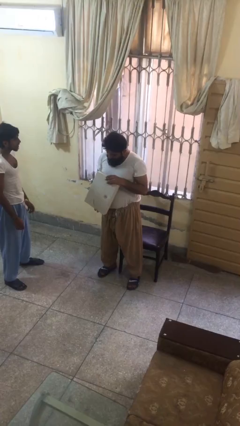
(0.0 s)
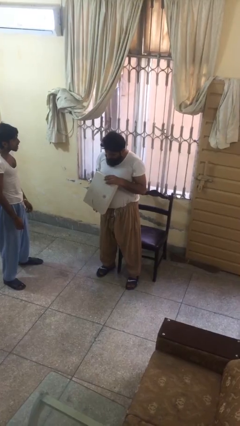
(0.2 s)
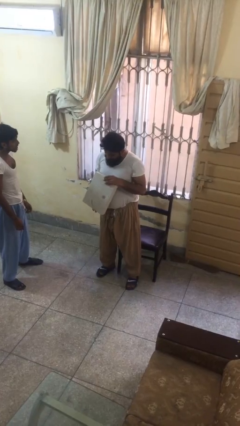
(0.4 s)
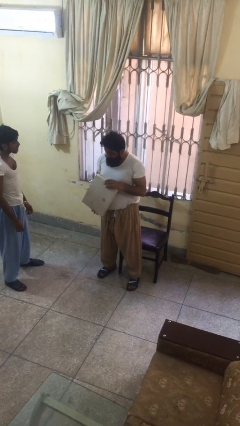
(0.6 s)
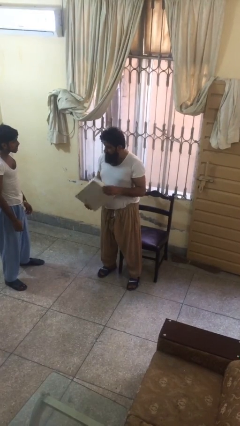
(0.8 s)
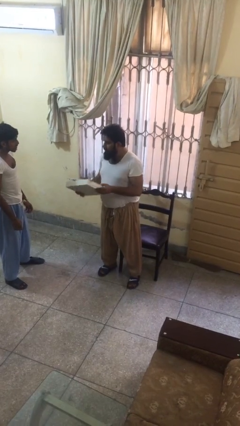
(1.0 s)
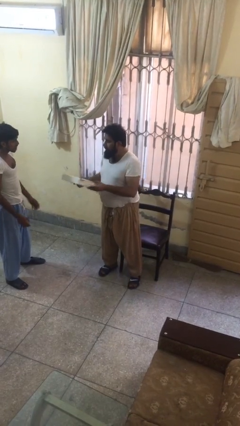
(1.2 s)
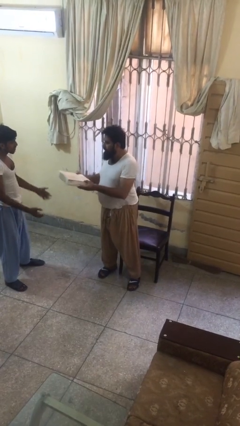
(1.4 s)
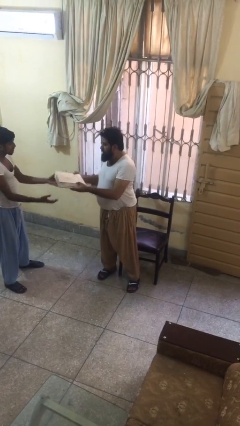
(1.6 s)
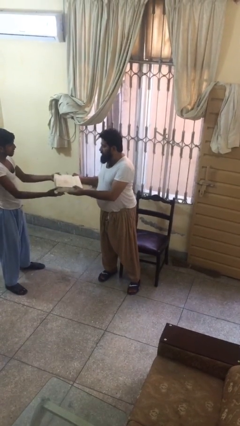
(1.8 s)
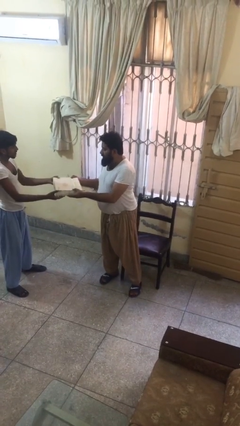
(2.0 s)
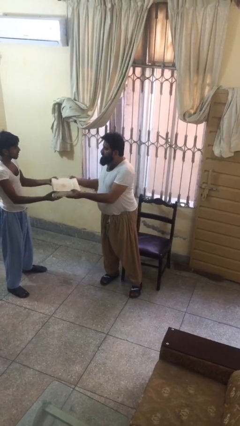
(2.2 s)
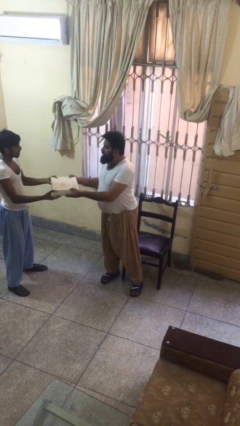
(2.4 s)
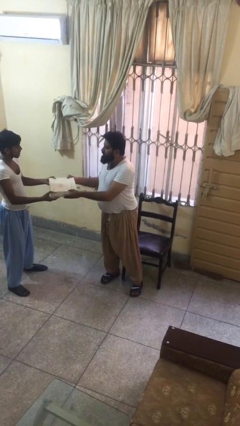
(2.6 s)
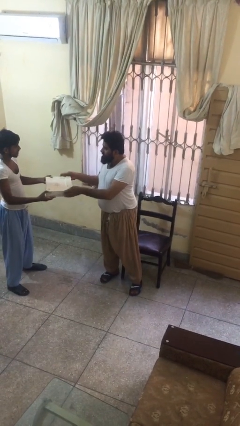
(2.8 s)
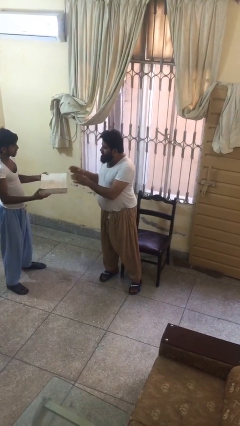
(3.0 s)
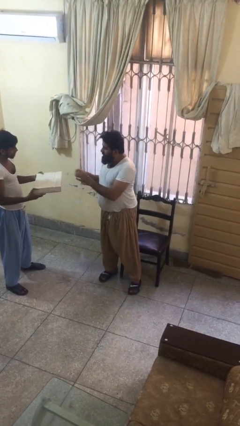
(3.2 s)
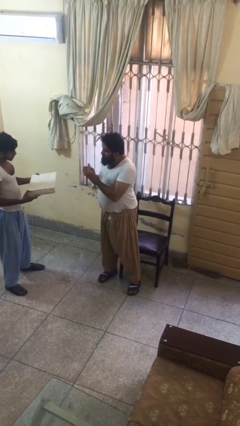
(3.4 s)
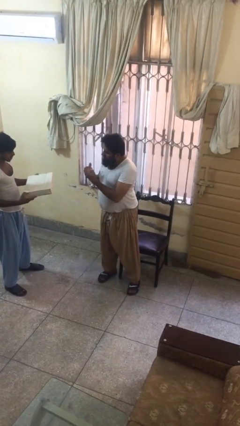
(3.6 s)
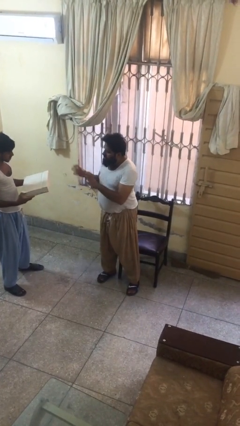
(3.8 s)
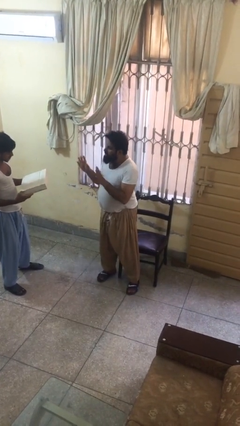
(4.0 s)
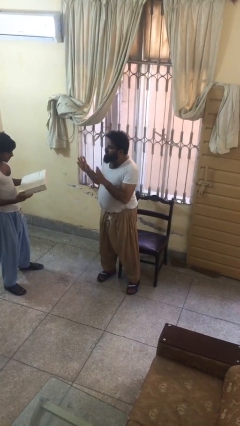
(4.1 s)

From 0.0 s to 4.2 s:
person transfers object to person

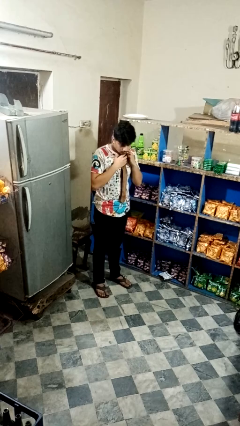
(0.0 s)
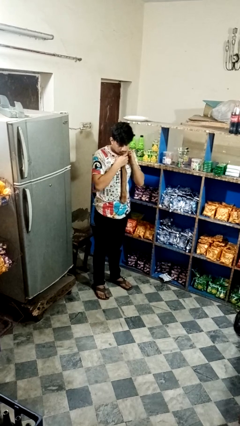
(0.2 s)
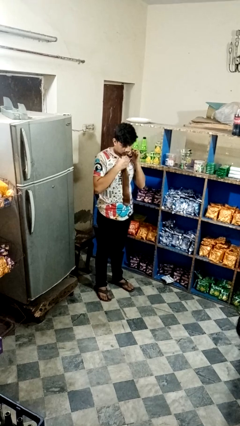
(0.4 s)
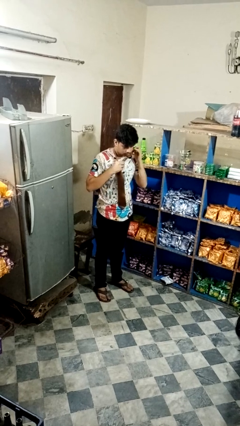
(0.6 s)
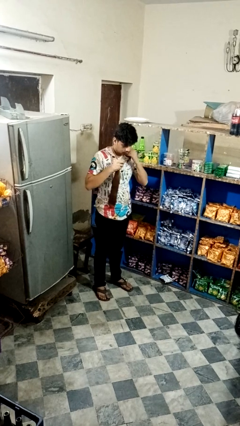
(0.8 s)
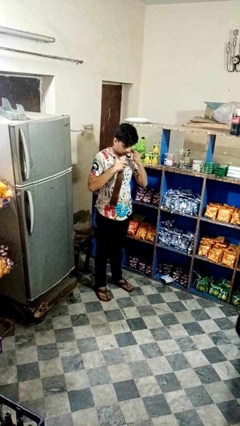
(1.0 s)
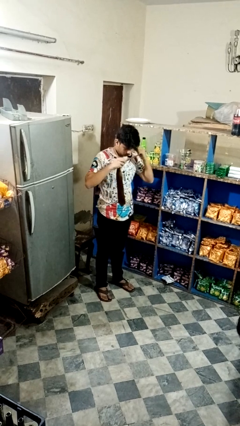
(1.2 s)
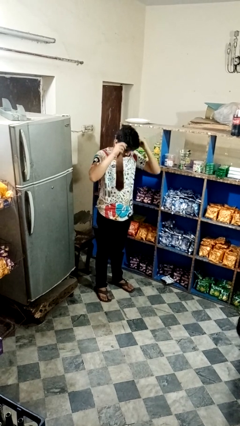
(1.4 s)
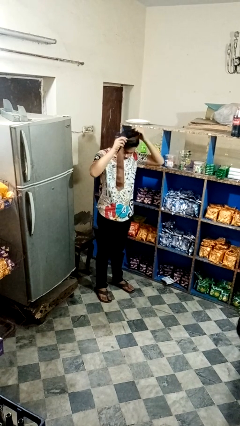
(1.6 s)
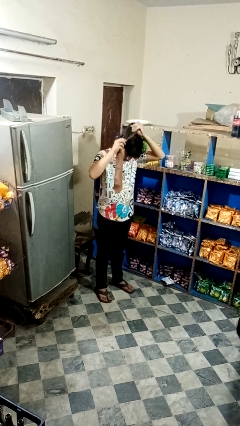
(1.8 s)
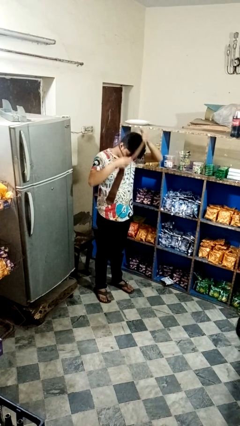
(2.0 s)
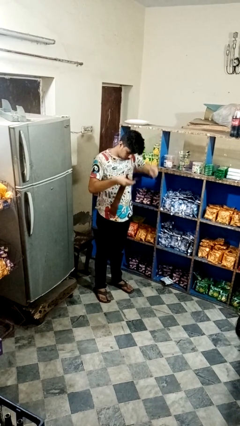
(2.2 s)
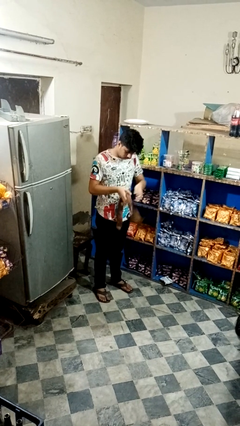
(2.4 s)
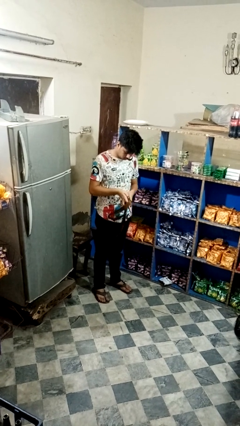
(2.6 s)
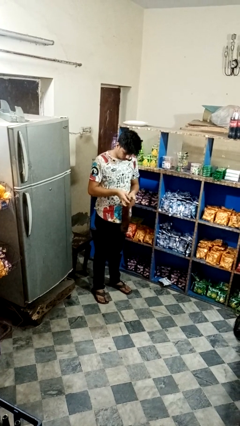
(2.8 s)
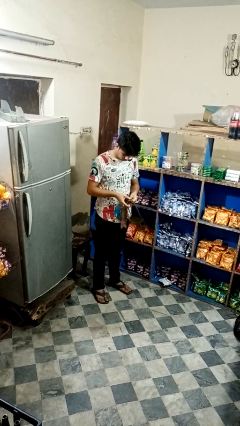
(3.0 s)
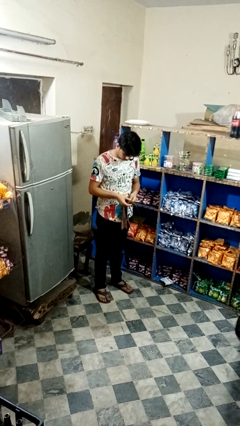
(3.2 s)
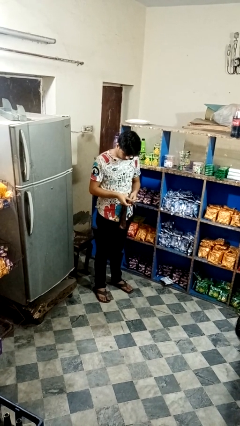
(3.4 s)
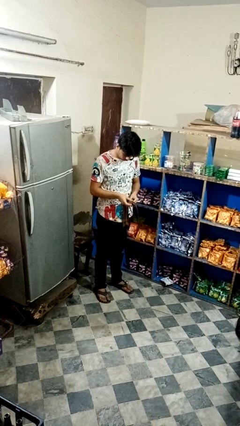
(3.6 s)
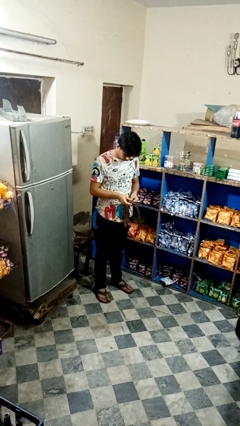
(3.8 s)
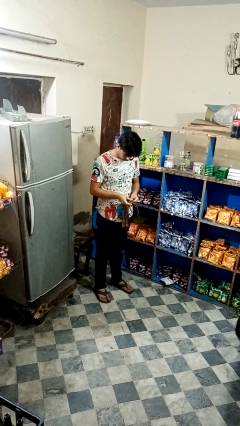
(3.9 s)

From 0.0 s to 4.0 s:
person takes off necktie

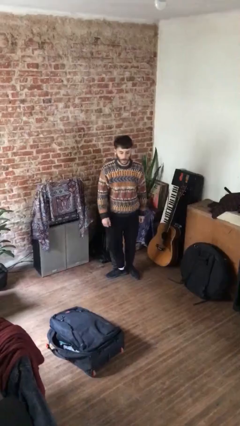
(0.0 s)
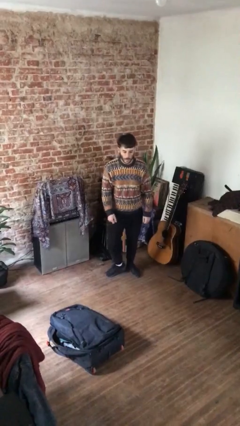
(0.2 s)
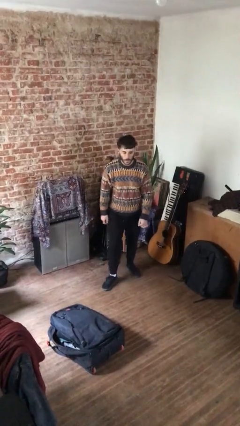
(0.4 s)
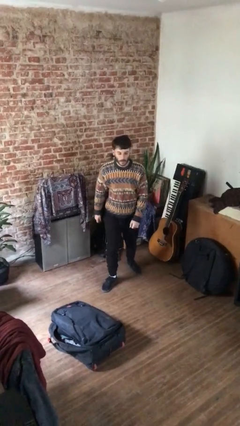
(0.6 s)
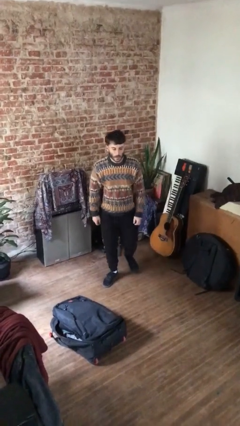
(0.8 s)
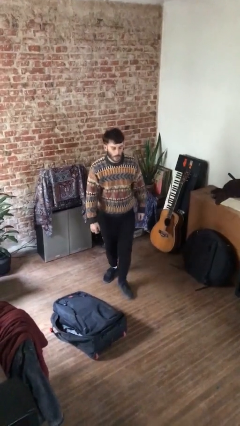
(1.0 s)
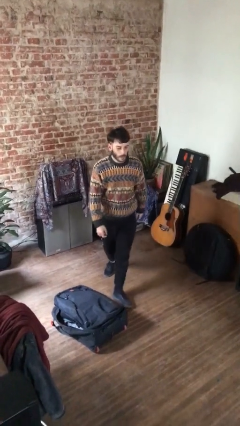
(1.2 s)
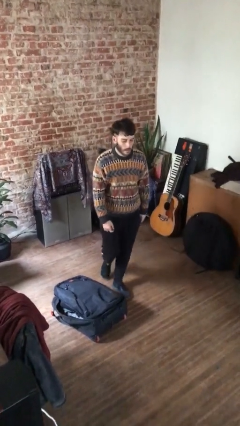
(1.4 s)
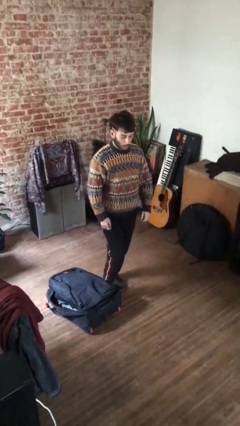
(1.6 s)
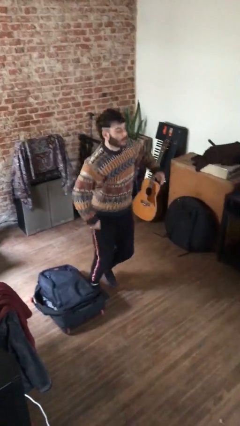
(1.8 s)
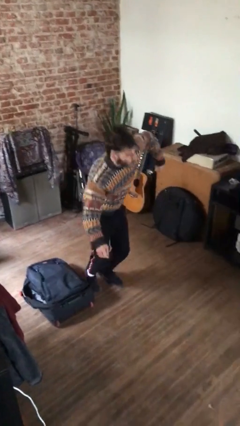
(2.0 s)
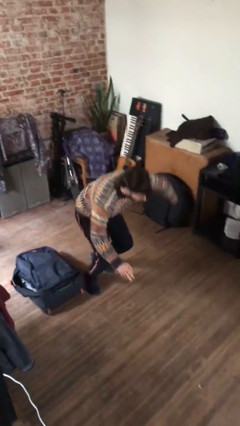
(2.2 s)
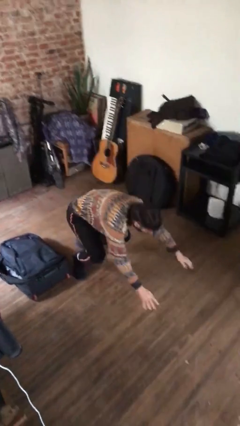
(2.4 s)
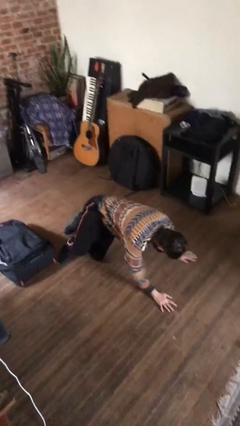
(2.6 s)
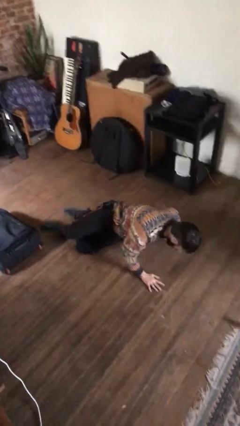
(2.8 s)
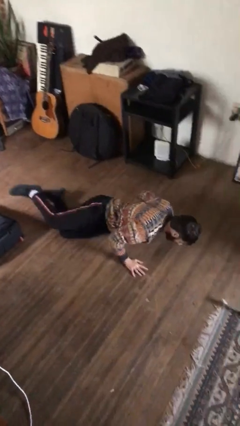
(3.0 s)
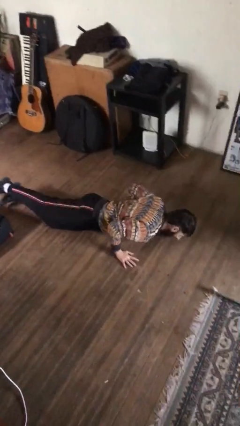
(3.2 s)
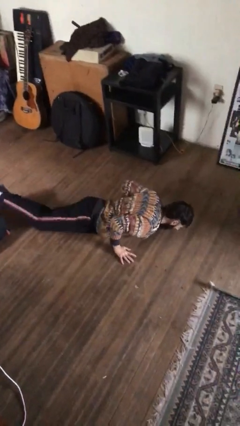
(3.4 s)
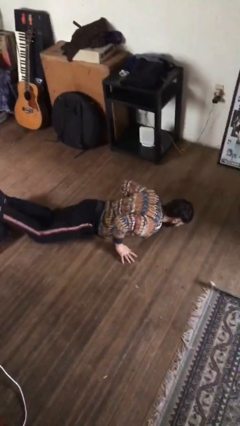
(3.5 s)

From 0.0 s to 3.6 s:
person trips on object on floor

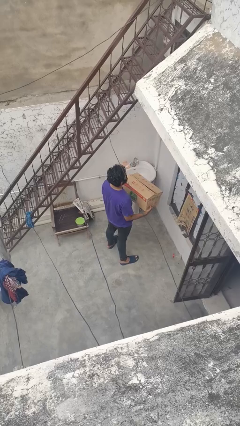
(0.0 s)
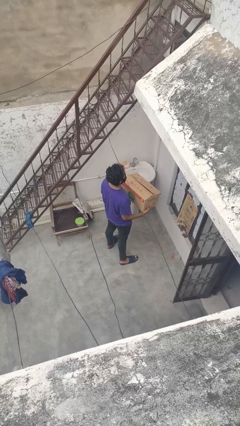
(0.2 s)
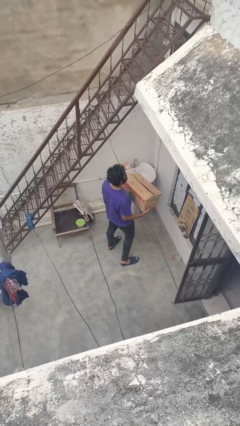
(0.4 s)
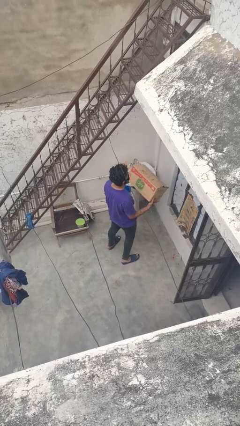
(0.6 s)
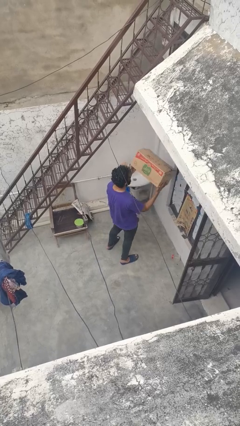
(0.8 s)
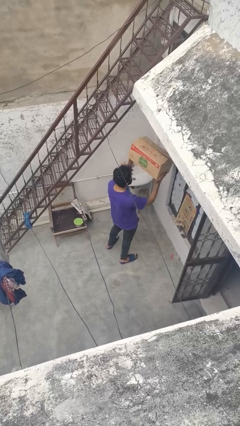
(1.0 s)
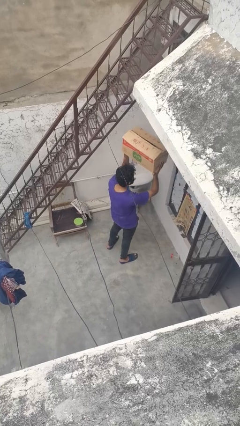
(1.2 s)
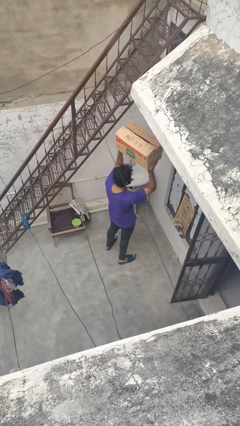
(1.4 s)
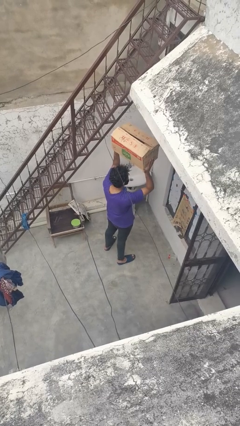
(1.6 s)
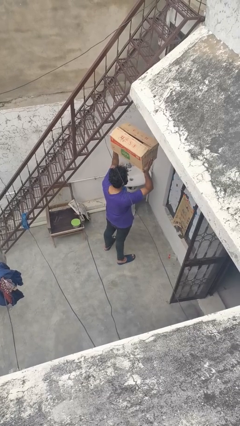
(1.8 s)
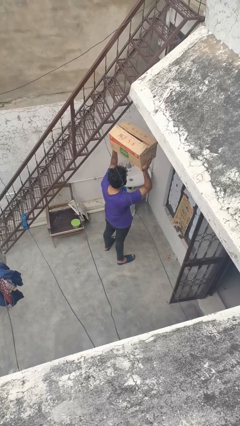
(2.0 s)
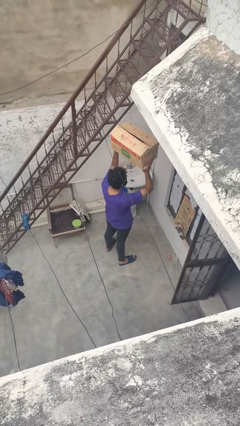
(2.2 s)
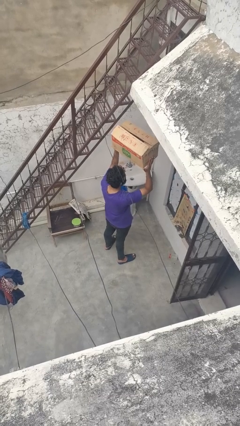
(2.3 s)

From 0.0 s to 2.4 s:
person holds object above head

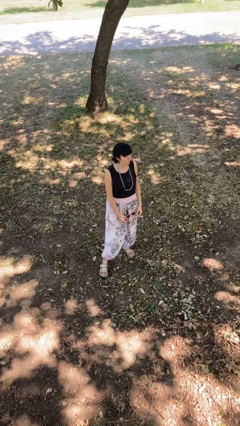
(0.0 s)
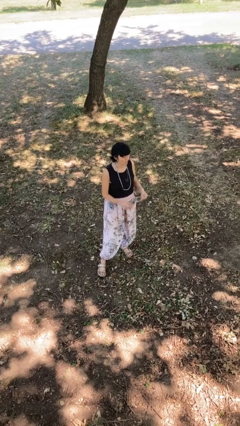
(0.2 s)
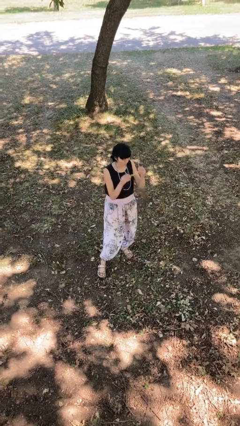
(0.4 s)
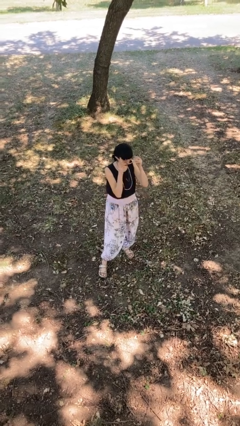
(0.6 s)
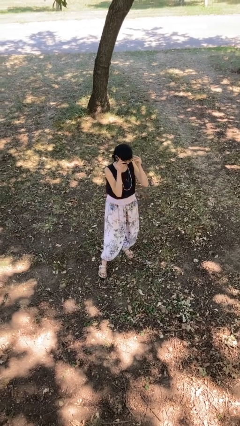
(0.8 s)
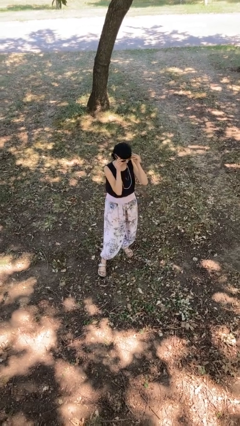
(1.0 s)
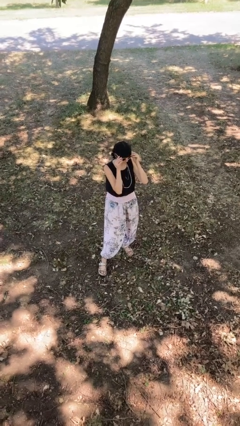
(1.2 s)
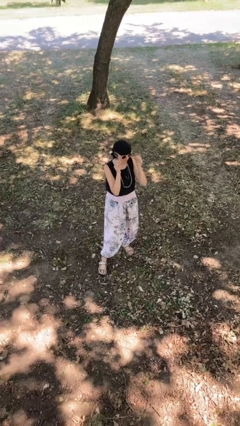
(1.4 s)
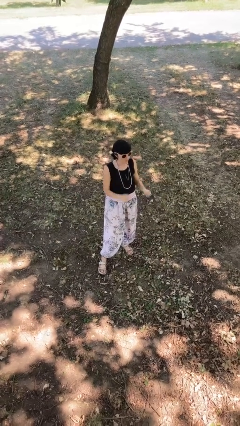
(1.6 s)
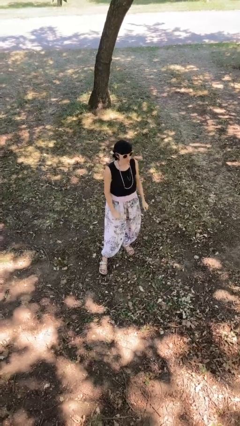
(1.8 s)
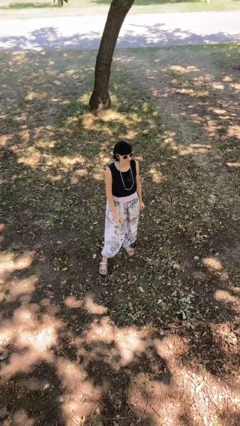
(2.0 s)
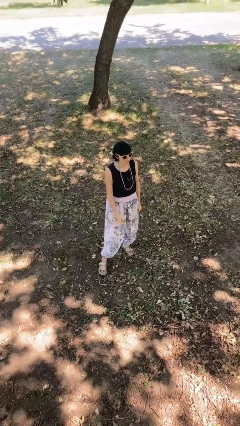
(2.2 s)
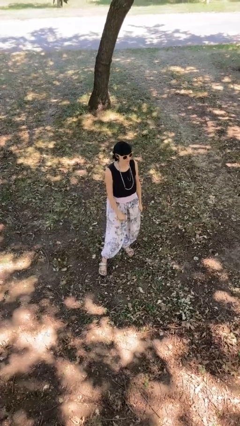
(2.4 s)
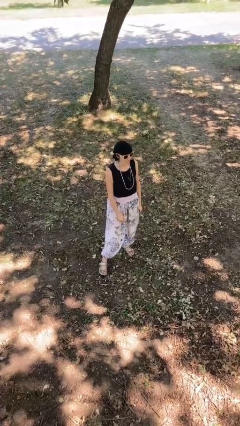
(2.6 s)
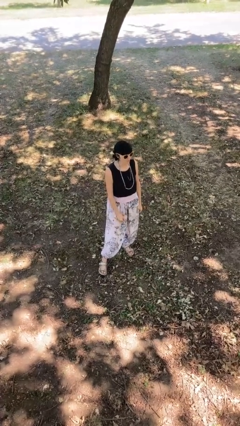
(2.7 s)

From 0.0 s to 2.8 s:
person puts on sunglasses

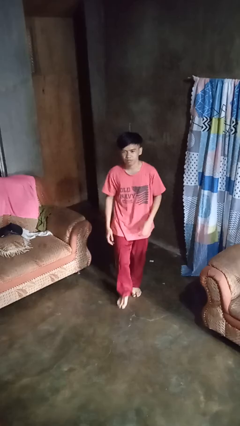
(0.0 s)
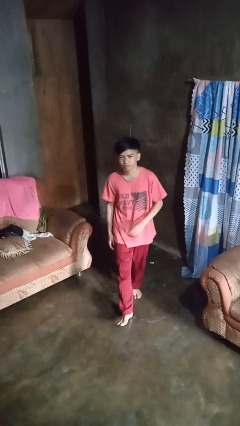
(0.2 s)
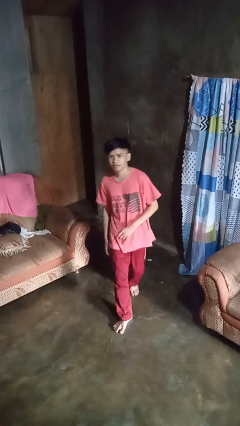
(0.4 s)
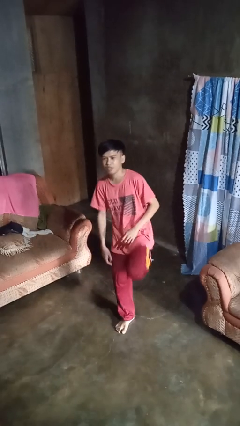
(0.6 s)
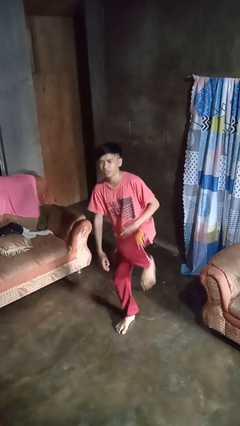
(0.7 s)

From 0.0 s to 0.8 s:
person karate kicks
